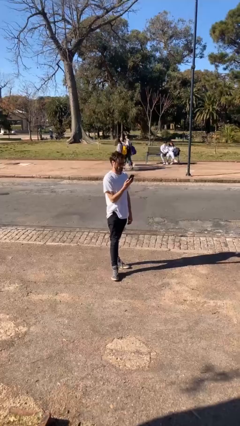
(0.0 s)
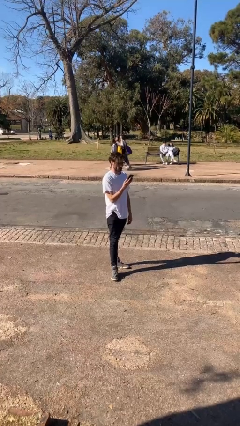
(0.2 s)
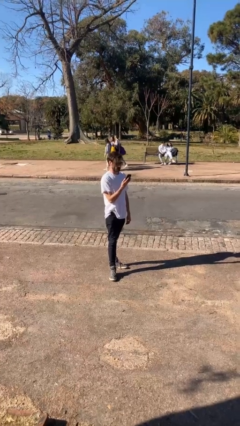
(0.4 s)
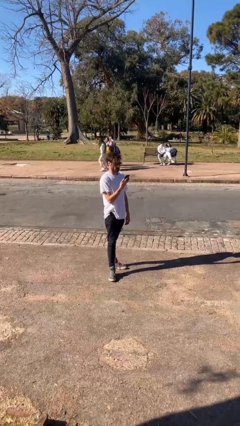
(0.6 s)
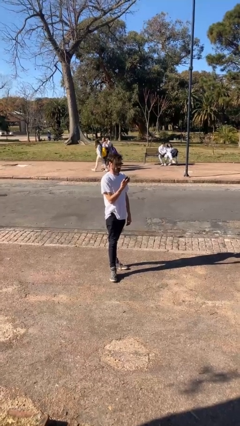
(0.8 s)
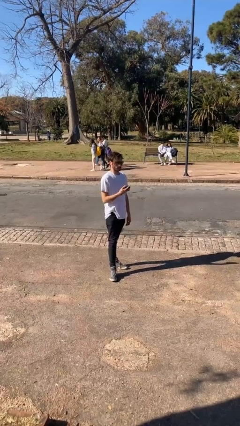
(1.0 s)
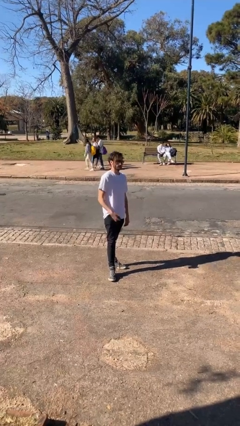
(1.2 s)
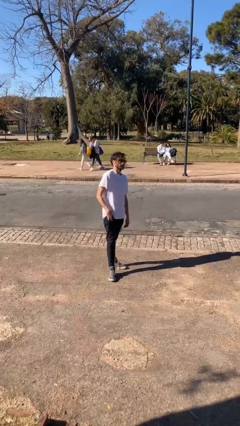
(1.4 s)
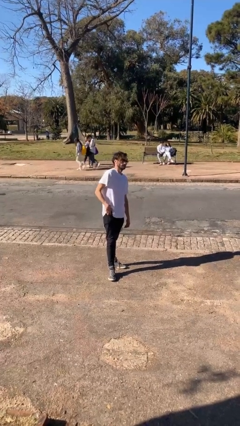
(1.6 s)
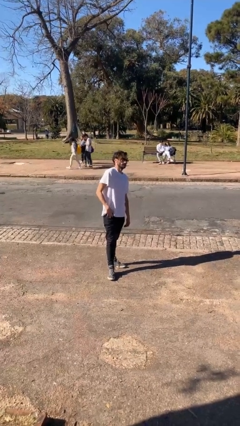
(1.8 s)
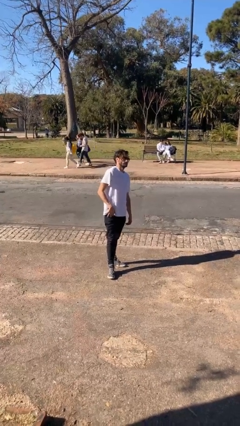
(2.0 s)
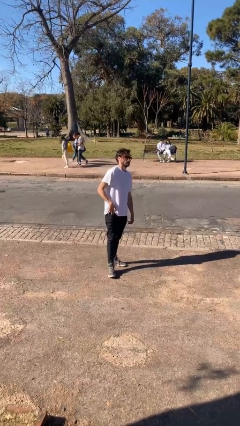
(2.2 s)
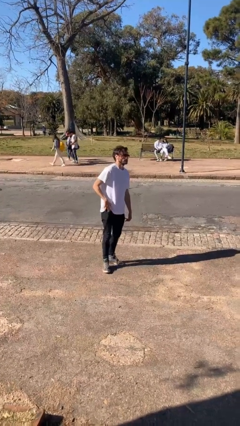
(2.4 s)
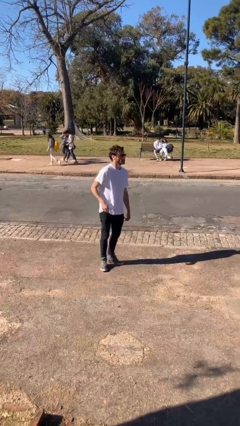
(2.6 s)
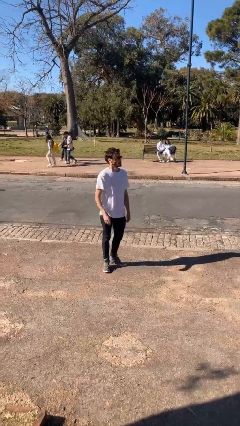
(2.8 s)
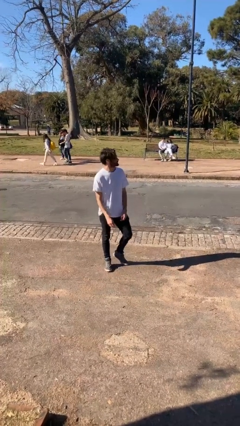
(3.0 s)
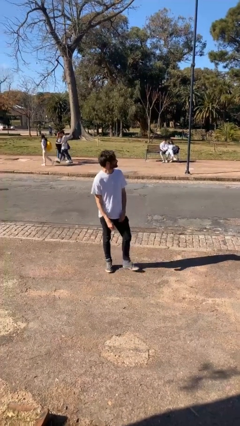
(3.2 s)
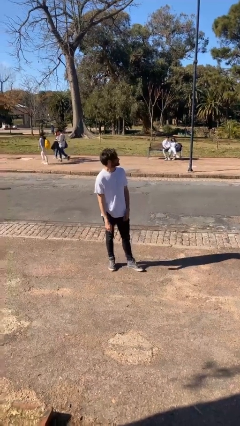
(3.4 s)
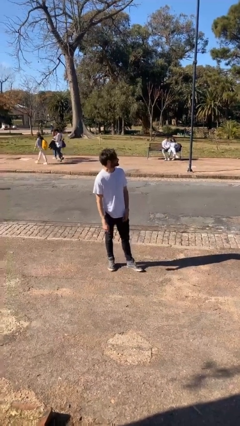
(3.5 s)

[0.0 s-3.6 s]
person puts phone into pocket

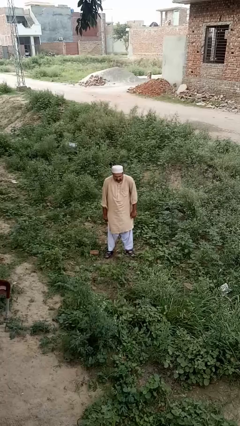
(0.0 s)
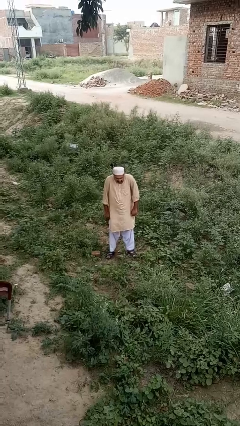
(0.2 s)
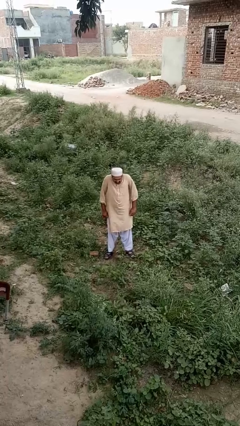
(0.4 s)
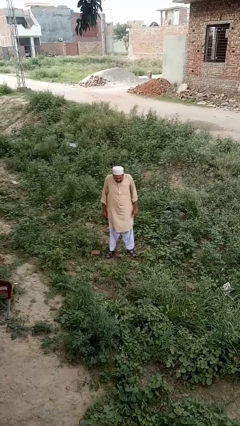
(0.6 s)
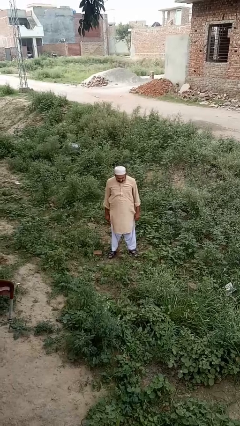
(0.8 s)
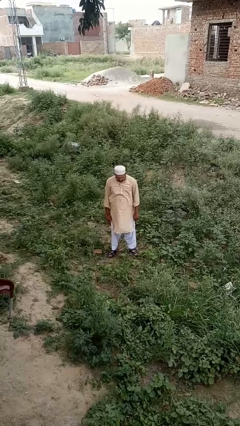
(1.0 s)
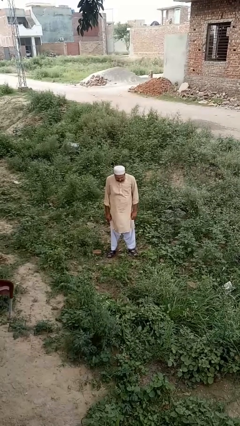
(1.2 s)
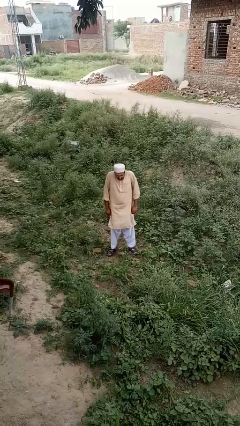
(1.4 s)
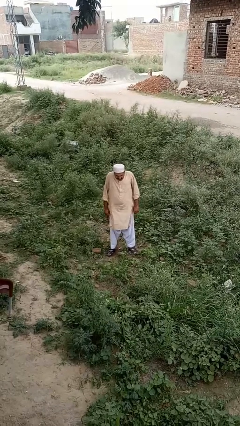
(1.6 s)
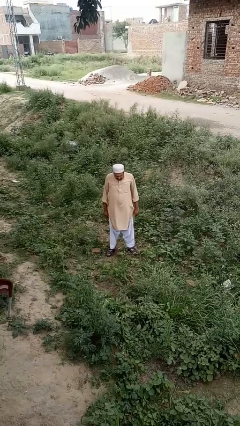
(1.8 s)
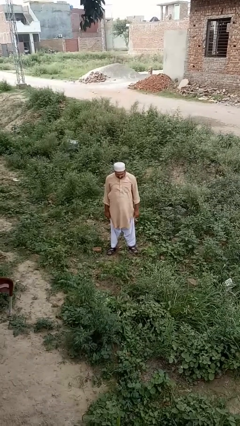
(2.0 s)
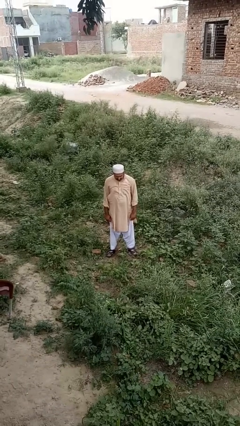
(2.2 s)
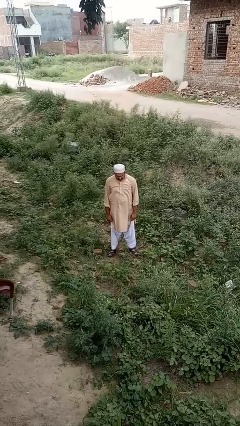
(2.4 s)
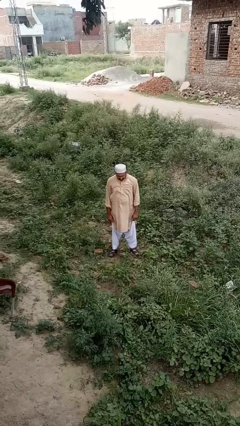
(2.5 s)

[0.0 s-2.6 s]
person shrugs

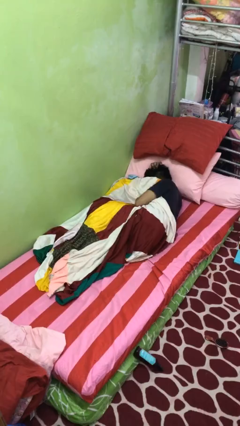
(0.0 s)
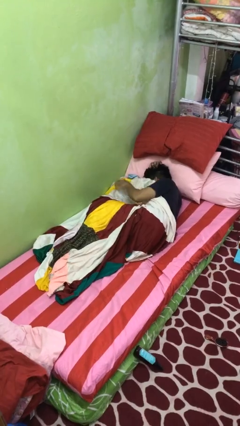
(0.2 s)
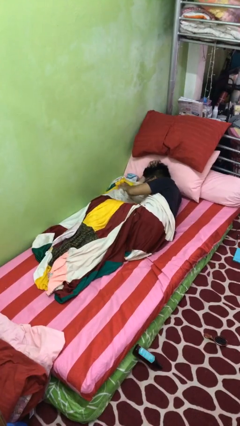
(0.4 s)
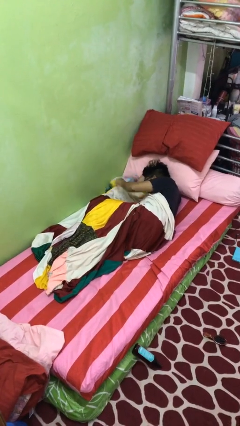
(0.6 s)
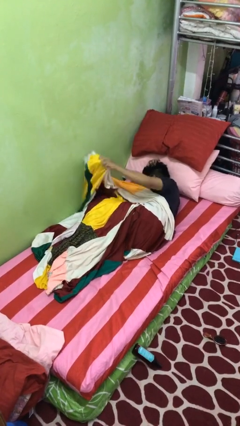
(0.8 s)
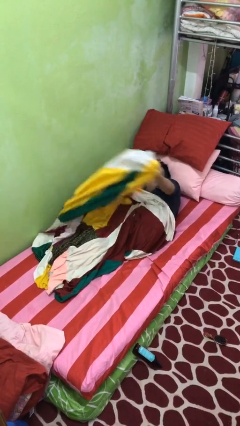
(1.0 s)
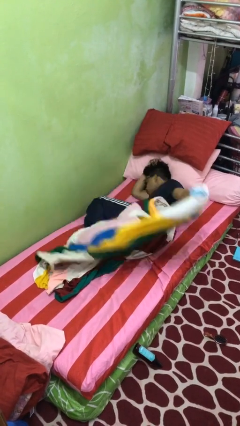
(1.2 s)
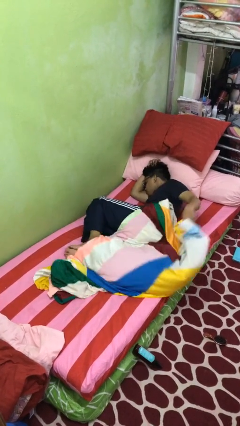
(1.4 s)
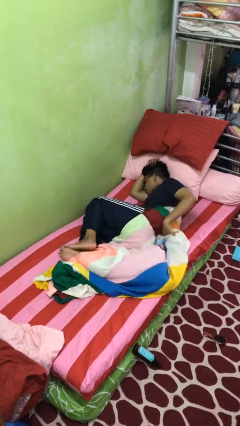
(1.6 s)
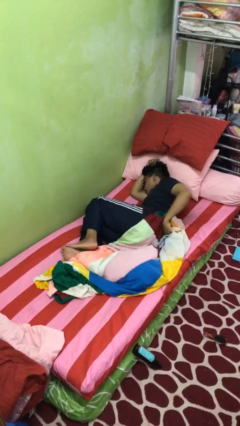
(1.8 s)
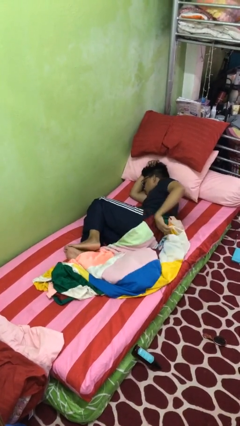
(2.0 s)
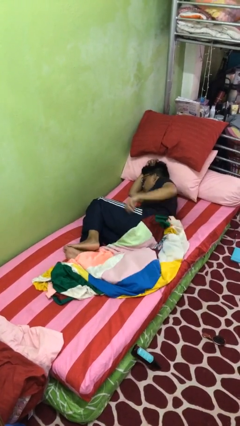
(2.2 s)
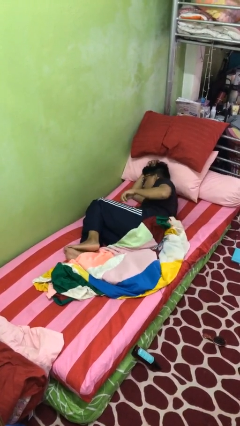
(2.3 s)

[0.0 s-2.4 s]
person uncovers with blanket

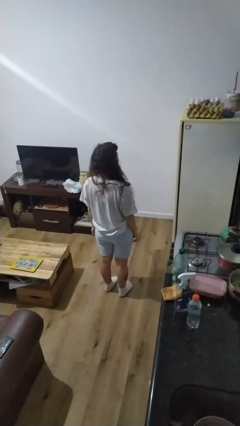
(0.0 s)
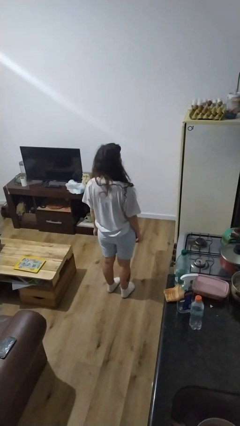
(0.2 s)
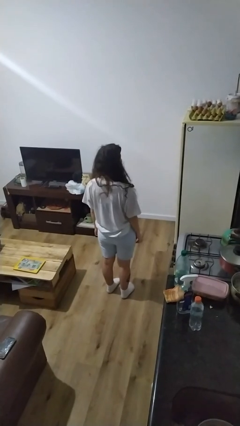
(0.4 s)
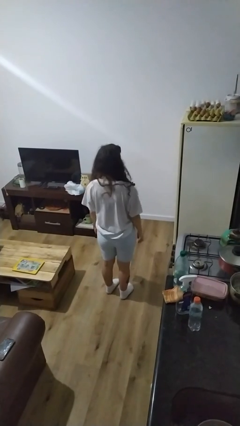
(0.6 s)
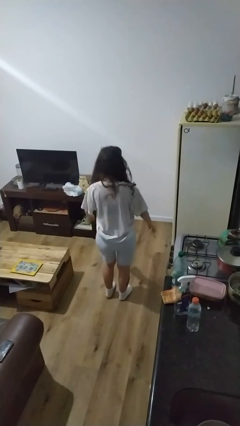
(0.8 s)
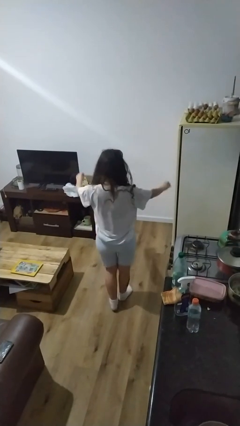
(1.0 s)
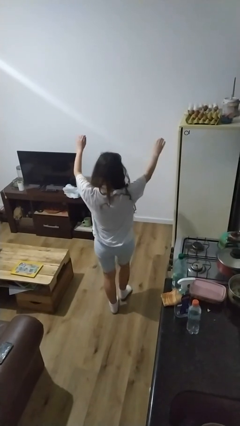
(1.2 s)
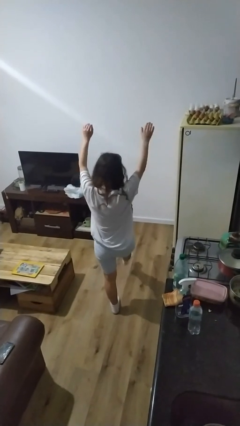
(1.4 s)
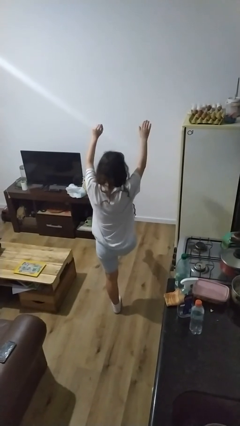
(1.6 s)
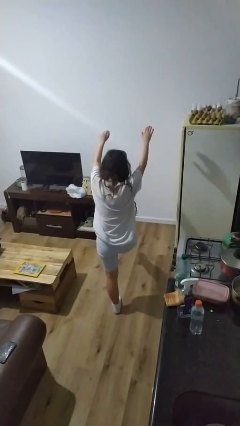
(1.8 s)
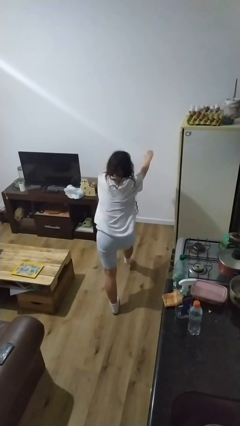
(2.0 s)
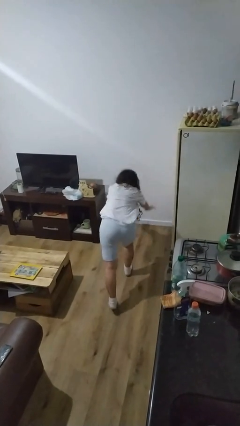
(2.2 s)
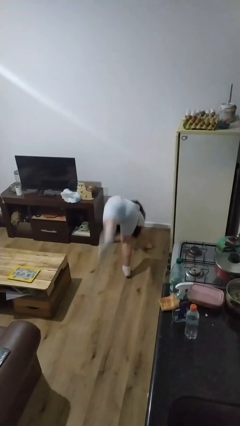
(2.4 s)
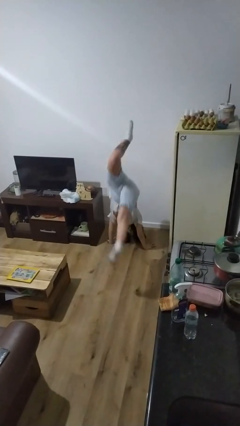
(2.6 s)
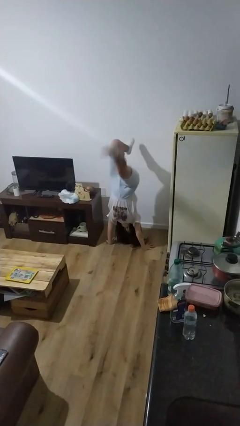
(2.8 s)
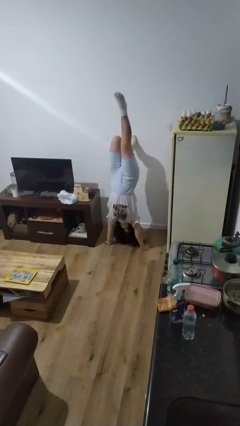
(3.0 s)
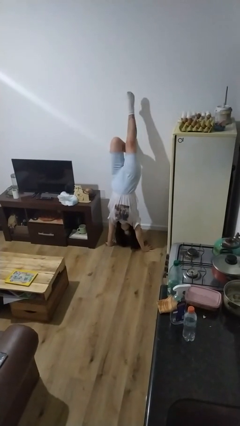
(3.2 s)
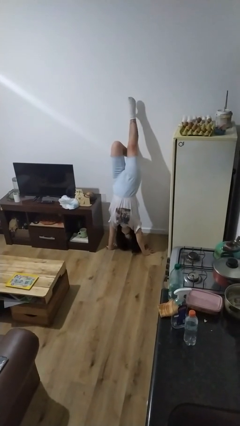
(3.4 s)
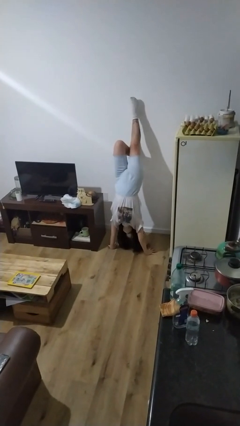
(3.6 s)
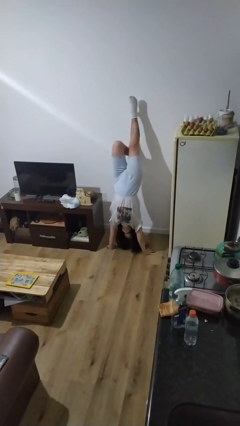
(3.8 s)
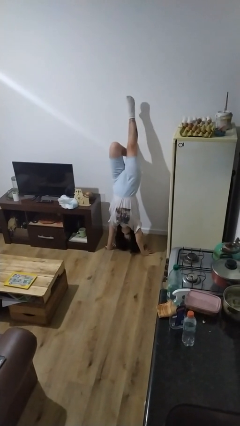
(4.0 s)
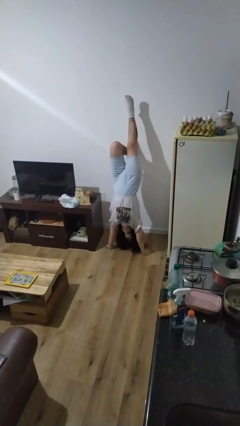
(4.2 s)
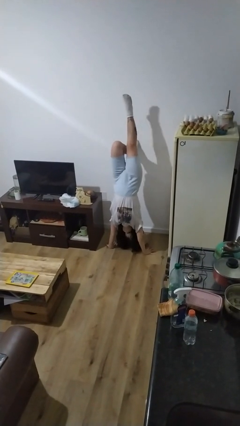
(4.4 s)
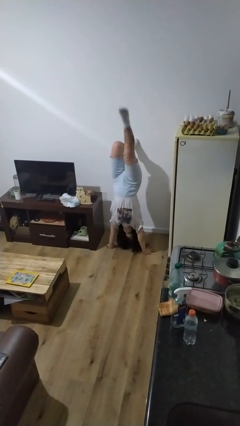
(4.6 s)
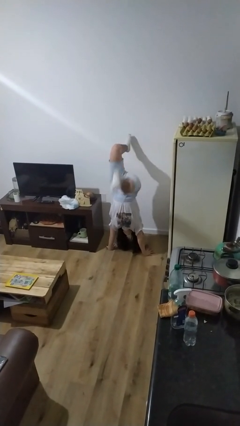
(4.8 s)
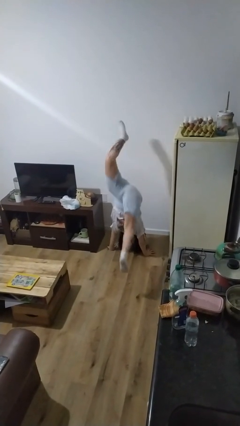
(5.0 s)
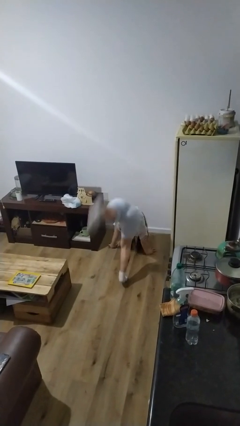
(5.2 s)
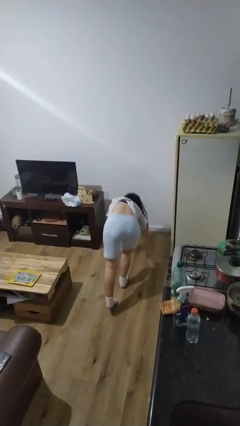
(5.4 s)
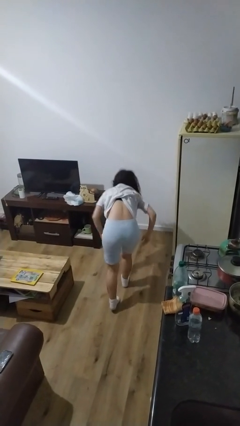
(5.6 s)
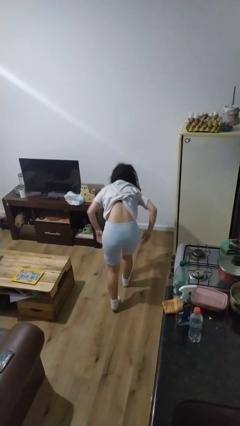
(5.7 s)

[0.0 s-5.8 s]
person handstand

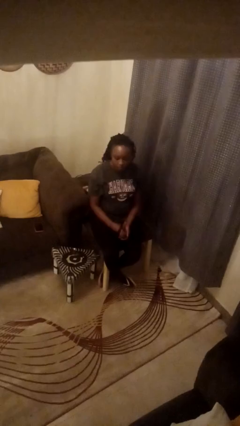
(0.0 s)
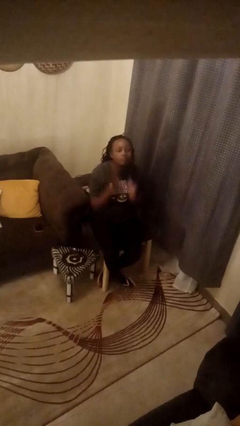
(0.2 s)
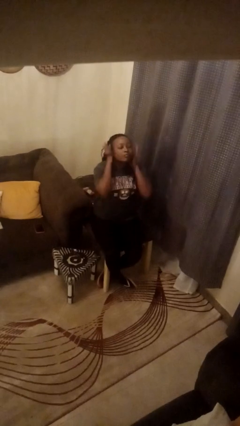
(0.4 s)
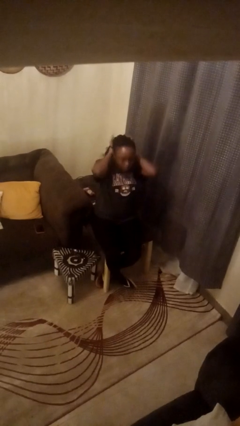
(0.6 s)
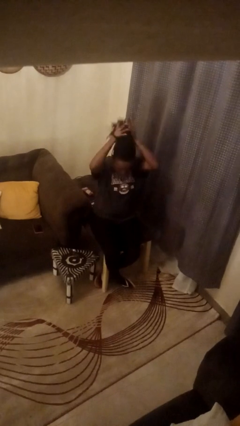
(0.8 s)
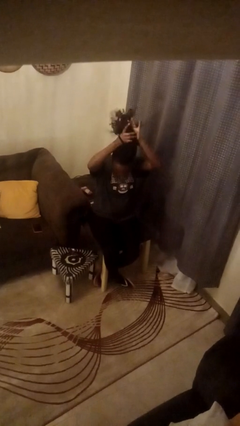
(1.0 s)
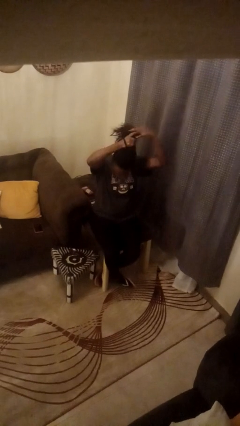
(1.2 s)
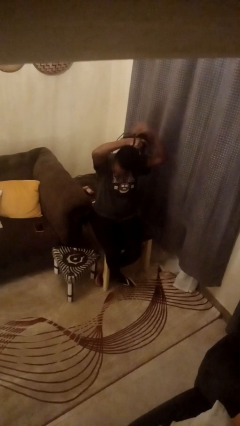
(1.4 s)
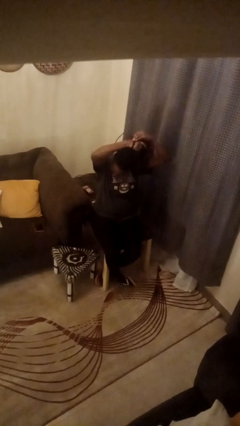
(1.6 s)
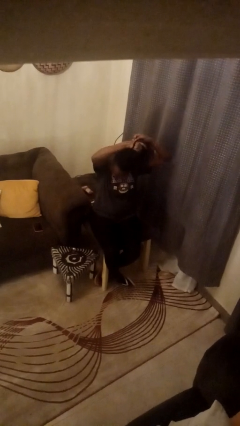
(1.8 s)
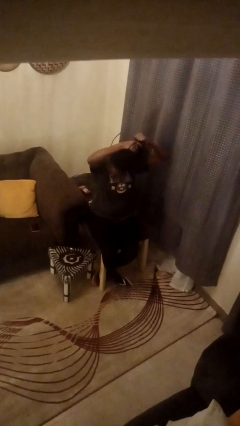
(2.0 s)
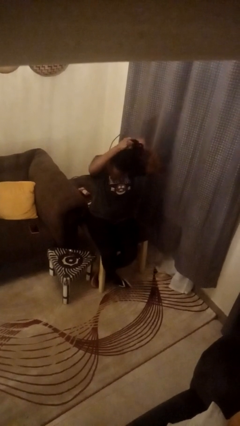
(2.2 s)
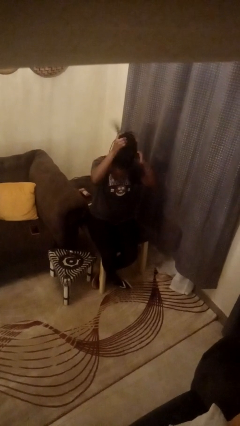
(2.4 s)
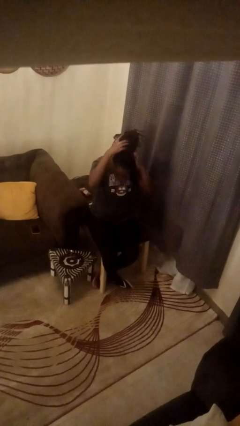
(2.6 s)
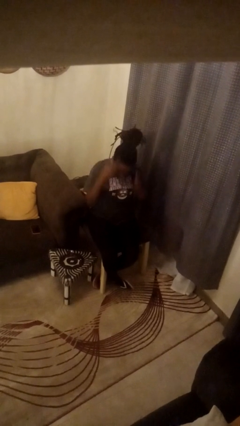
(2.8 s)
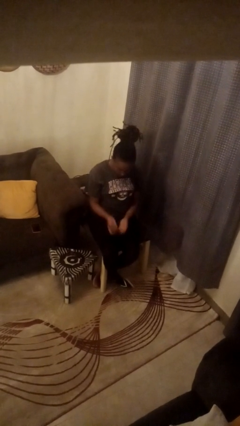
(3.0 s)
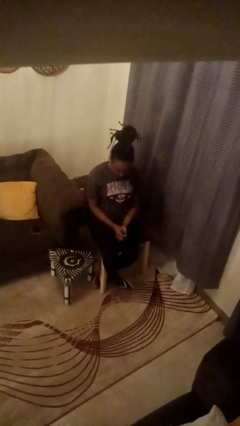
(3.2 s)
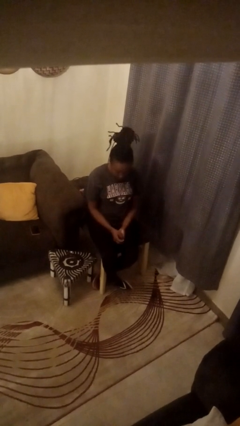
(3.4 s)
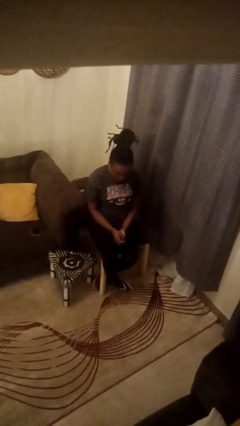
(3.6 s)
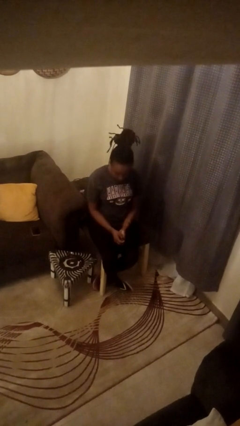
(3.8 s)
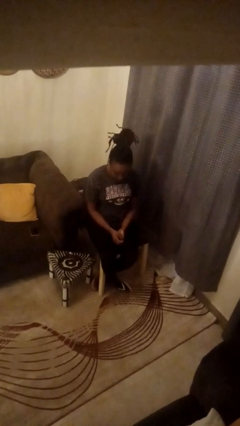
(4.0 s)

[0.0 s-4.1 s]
person puts hair in ponytail
